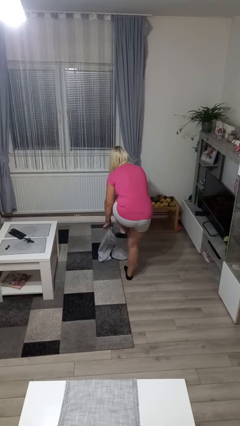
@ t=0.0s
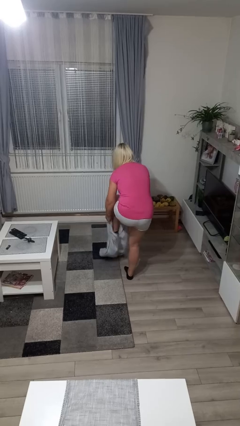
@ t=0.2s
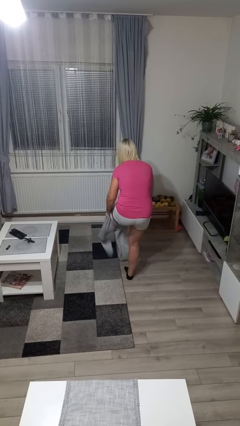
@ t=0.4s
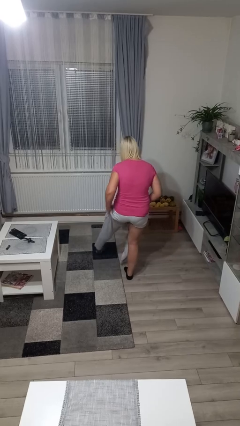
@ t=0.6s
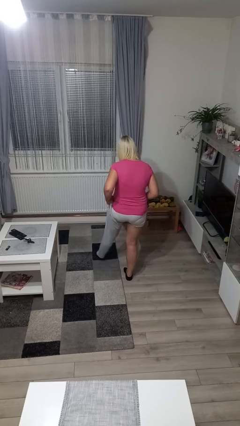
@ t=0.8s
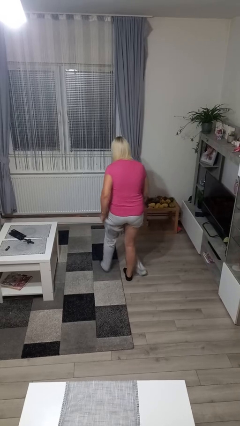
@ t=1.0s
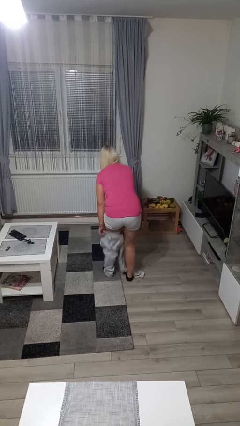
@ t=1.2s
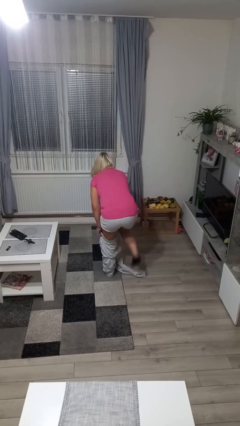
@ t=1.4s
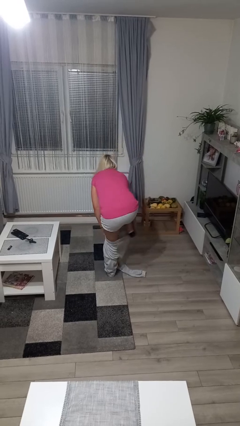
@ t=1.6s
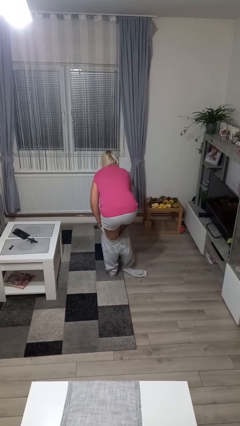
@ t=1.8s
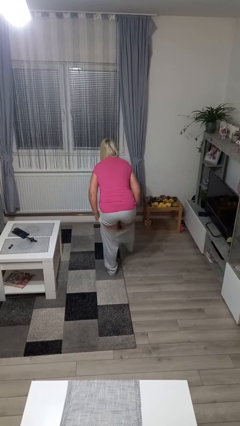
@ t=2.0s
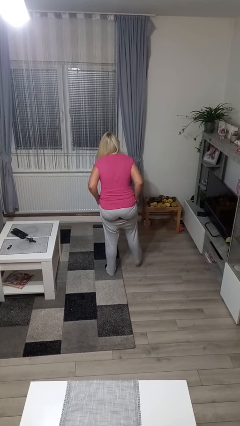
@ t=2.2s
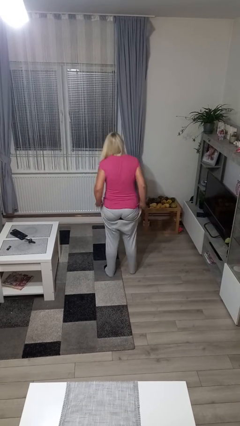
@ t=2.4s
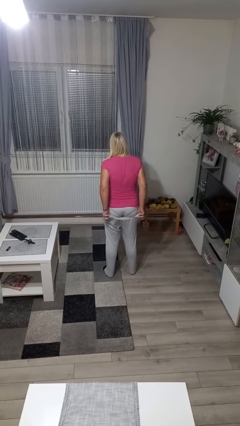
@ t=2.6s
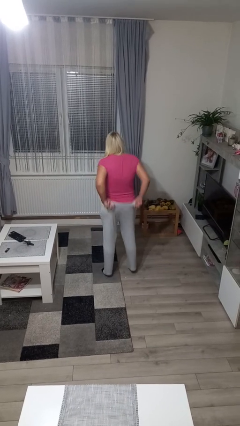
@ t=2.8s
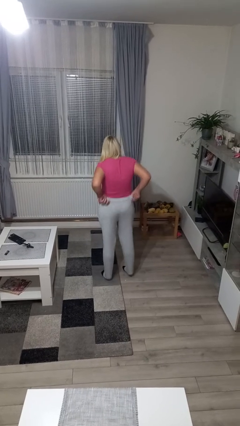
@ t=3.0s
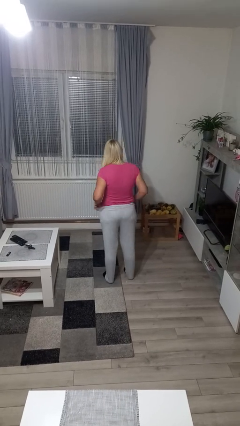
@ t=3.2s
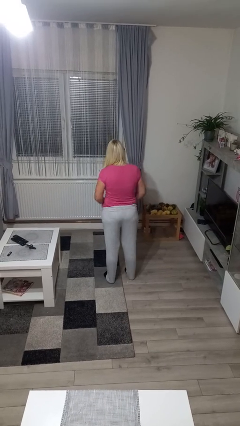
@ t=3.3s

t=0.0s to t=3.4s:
person puts on pants

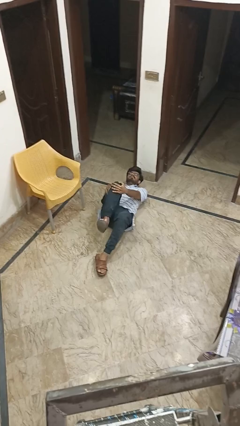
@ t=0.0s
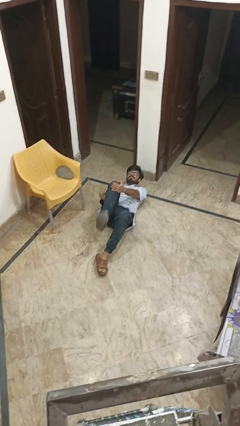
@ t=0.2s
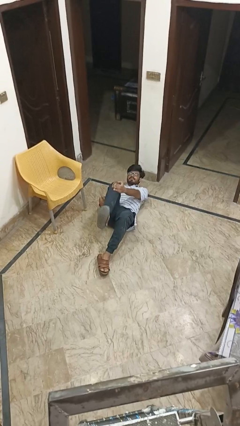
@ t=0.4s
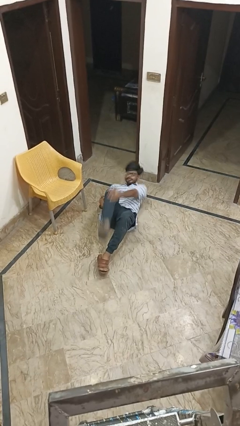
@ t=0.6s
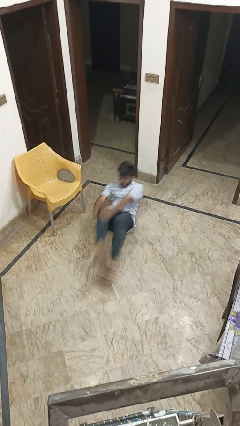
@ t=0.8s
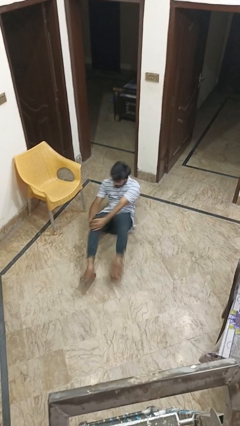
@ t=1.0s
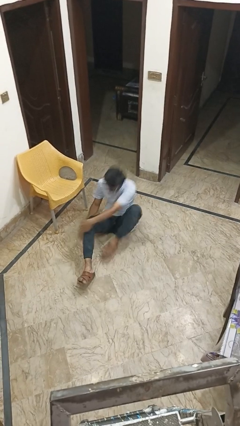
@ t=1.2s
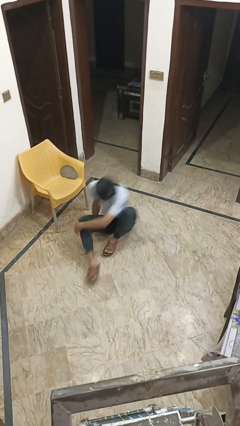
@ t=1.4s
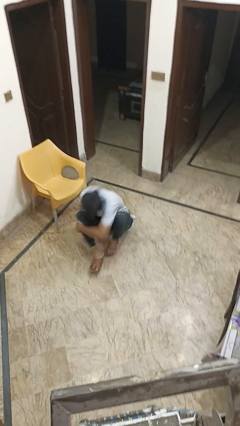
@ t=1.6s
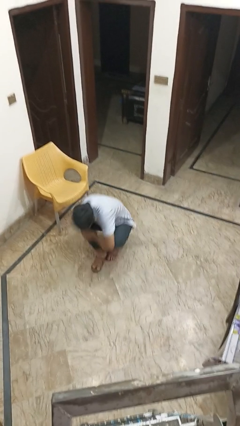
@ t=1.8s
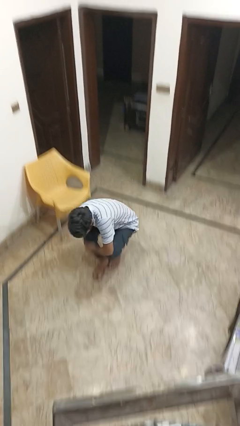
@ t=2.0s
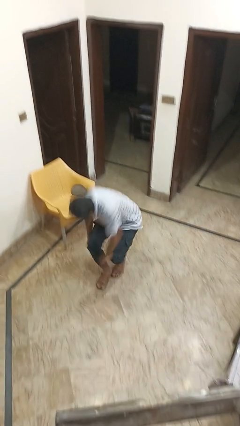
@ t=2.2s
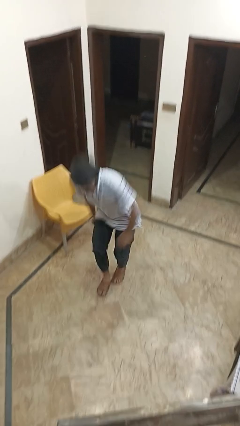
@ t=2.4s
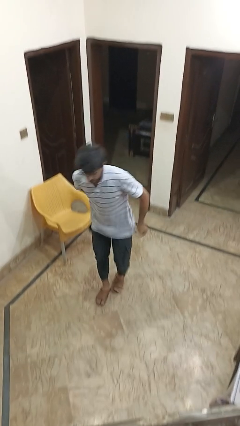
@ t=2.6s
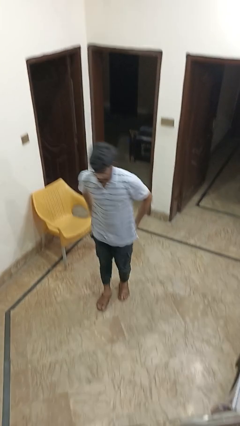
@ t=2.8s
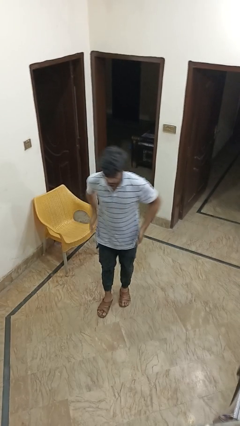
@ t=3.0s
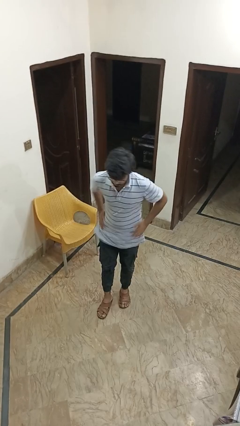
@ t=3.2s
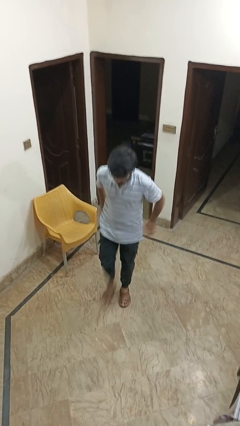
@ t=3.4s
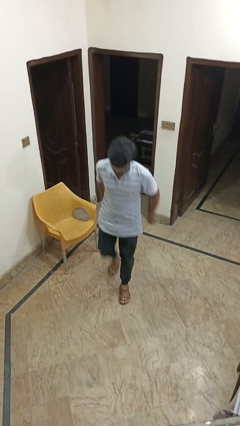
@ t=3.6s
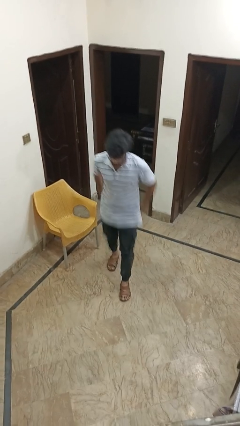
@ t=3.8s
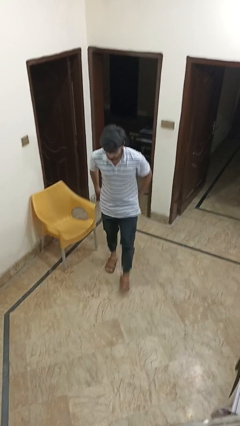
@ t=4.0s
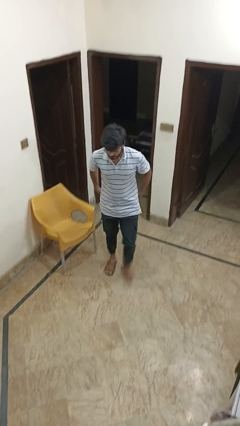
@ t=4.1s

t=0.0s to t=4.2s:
person stands up from floor

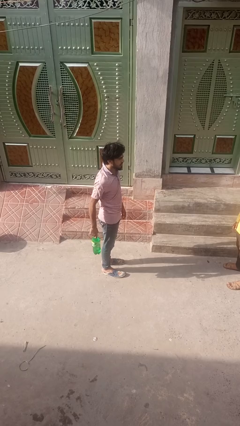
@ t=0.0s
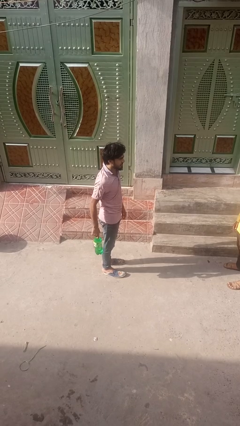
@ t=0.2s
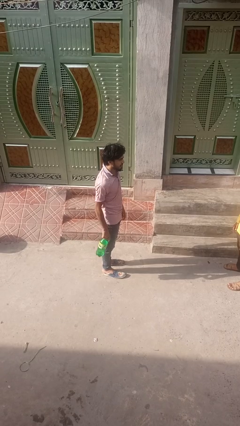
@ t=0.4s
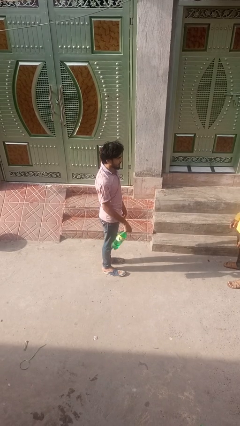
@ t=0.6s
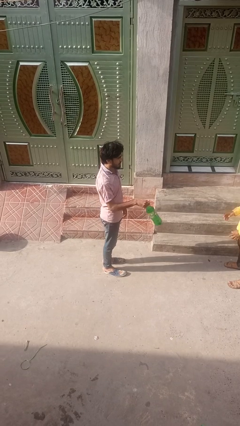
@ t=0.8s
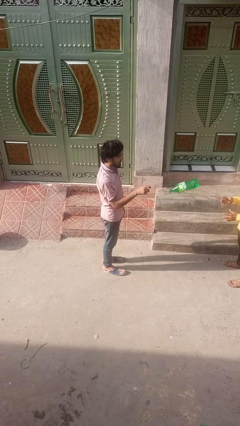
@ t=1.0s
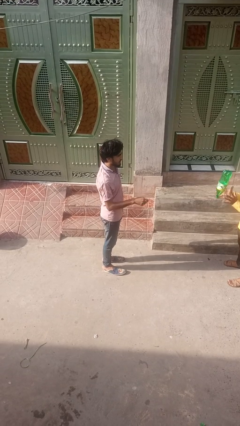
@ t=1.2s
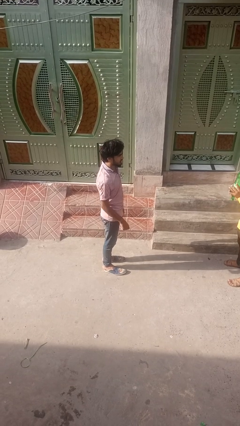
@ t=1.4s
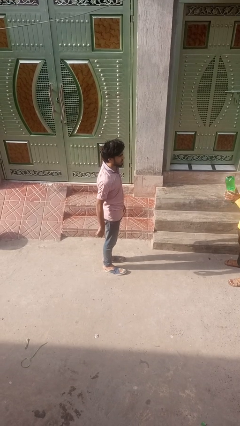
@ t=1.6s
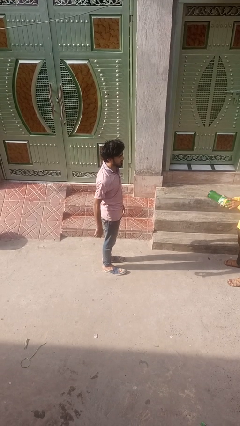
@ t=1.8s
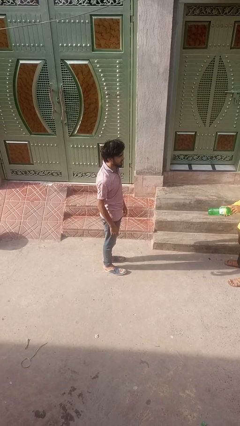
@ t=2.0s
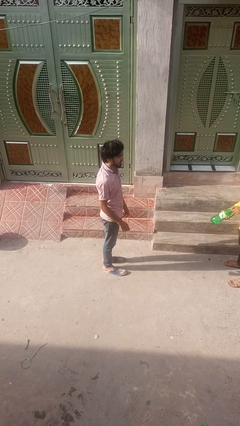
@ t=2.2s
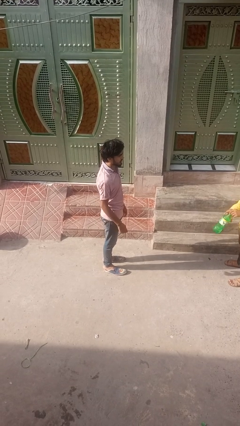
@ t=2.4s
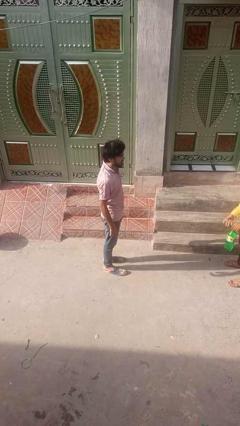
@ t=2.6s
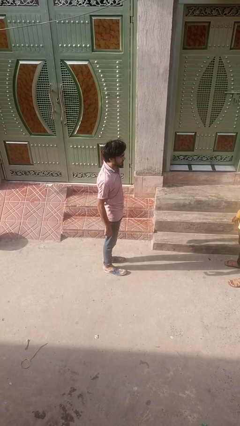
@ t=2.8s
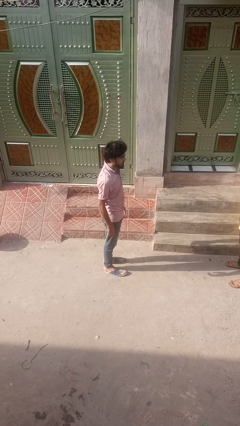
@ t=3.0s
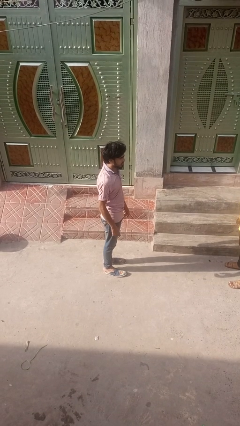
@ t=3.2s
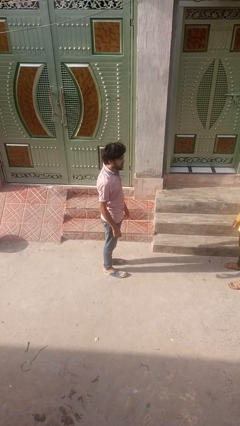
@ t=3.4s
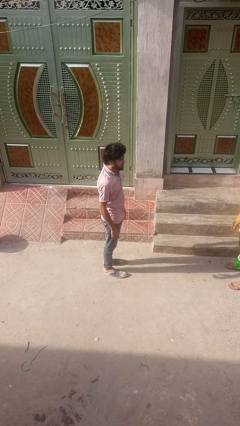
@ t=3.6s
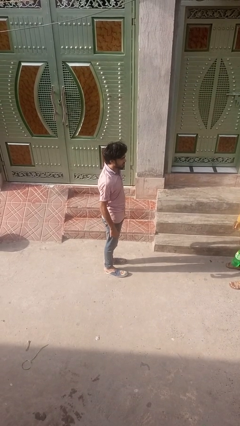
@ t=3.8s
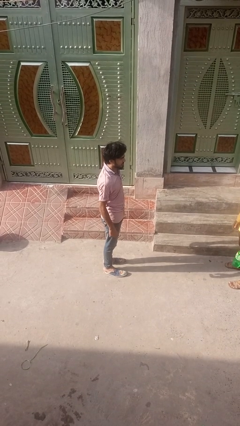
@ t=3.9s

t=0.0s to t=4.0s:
person throws object to person

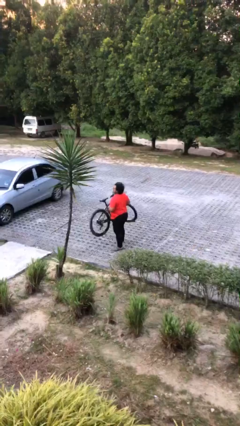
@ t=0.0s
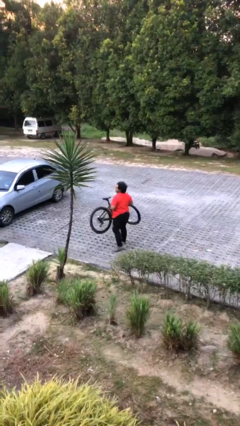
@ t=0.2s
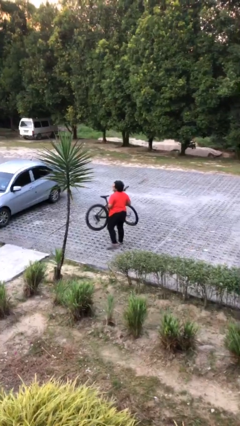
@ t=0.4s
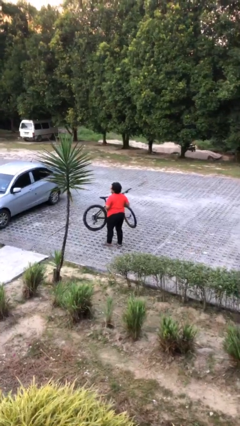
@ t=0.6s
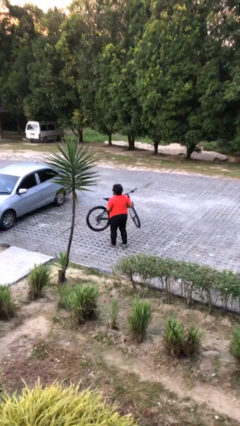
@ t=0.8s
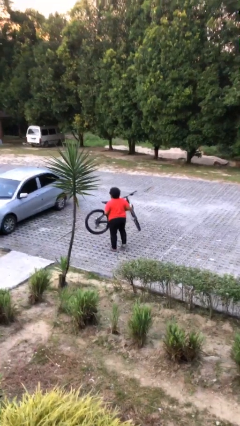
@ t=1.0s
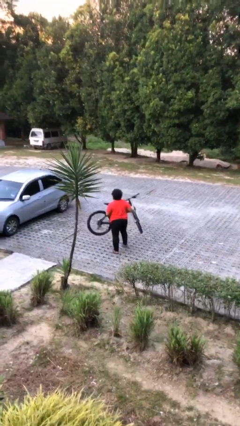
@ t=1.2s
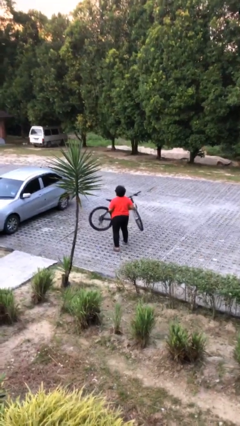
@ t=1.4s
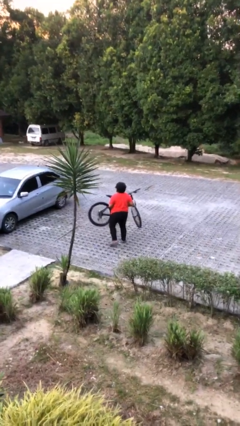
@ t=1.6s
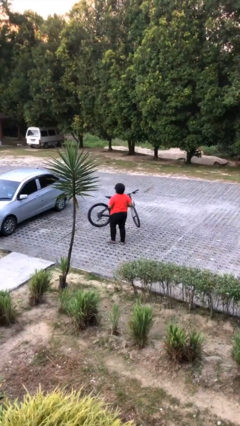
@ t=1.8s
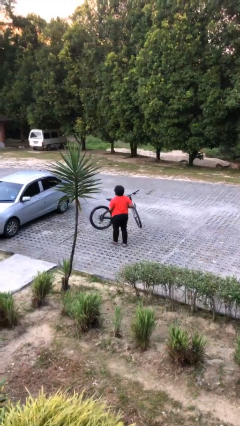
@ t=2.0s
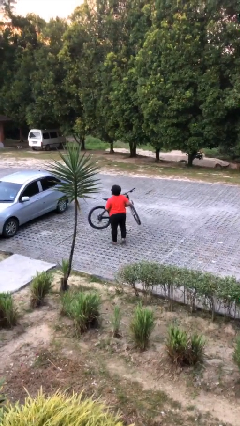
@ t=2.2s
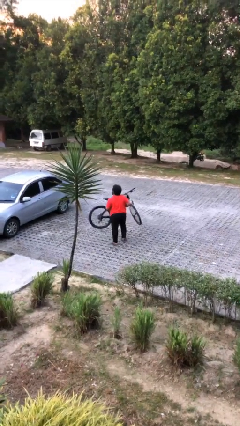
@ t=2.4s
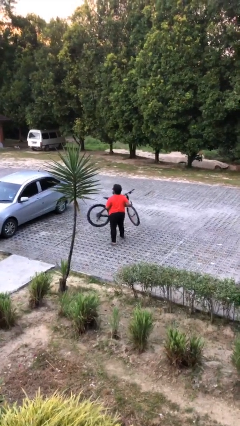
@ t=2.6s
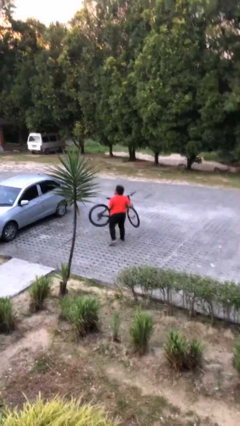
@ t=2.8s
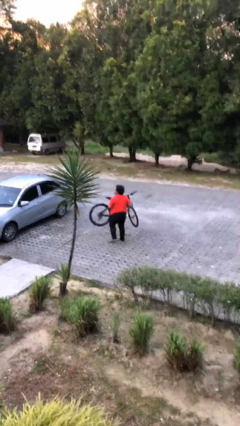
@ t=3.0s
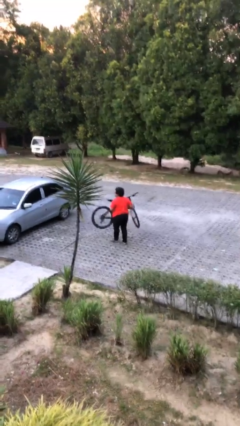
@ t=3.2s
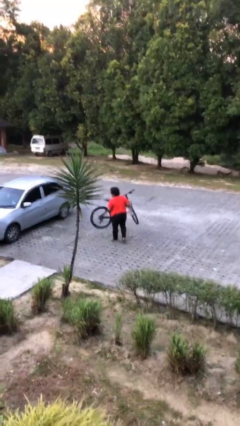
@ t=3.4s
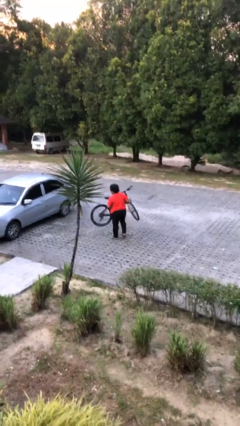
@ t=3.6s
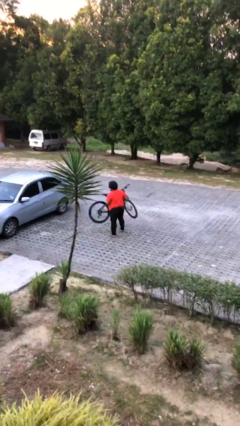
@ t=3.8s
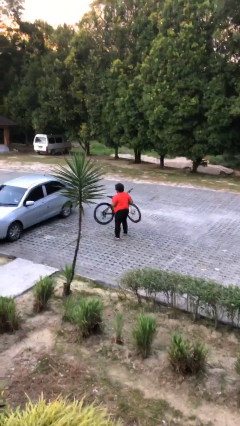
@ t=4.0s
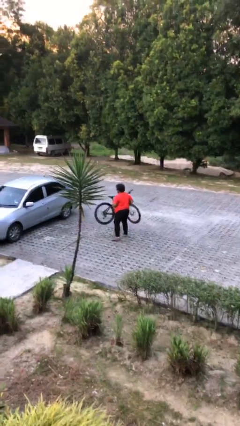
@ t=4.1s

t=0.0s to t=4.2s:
person carries heavy object

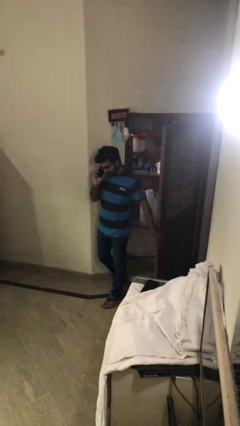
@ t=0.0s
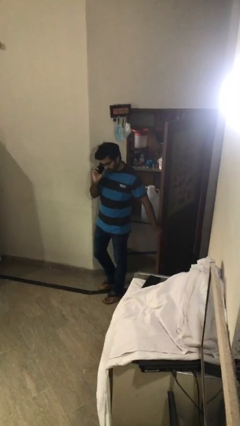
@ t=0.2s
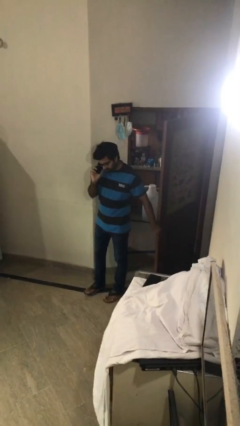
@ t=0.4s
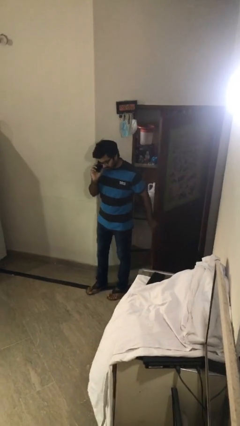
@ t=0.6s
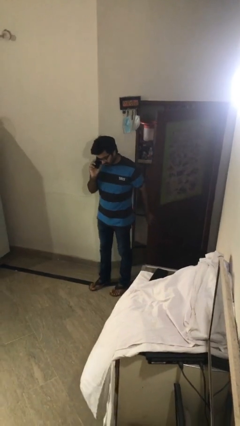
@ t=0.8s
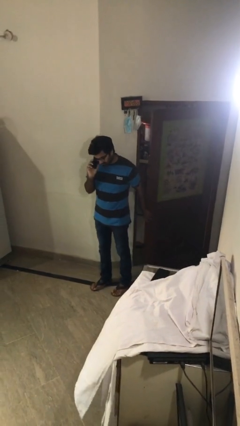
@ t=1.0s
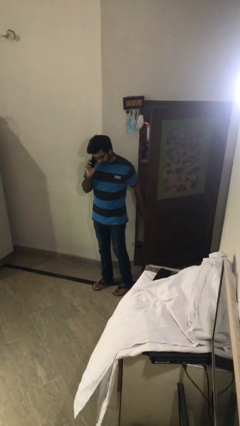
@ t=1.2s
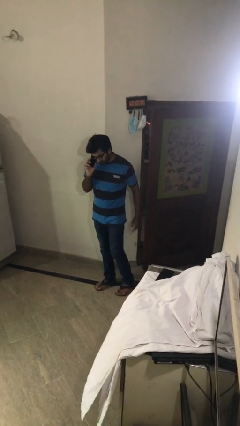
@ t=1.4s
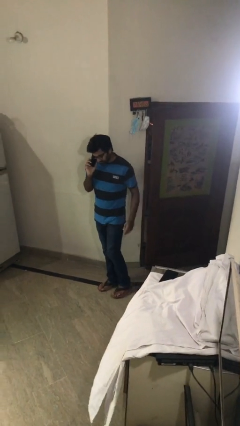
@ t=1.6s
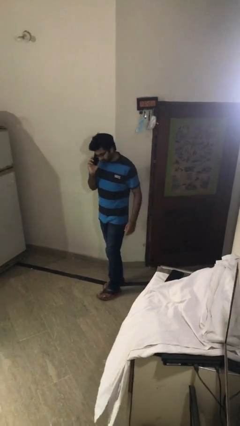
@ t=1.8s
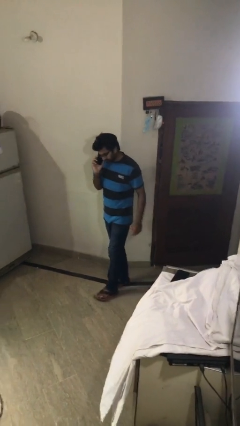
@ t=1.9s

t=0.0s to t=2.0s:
person closes facility door
